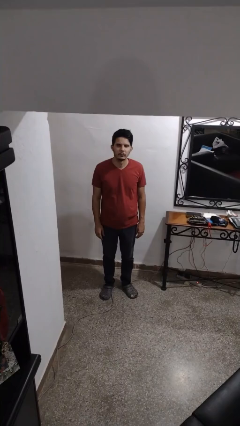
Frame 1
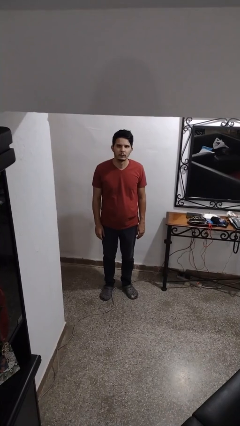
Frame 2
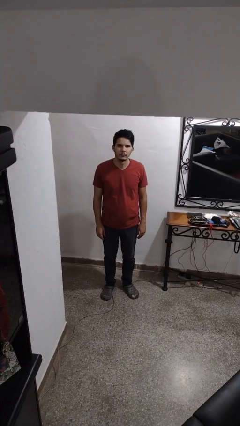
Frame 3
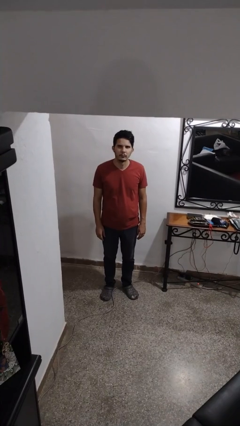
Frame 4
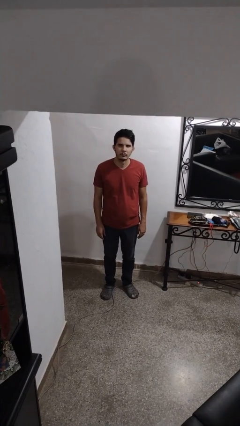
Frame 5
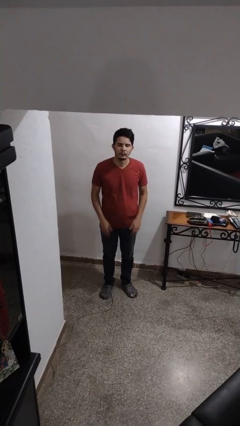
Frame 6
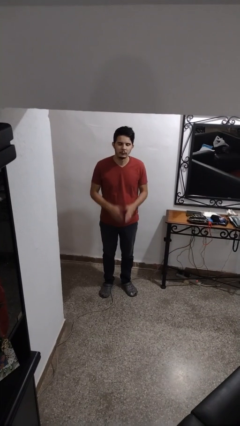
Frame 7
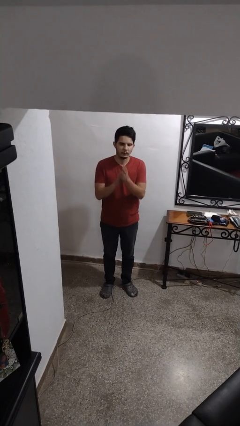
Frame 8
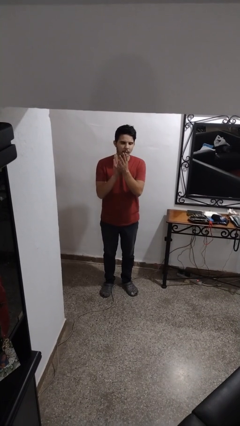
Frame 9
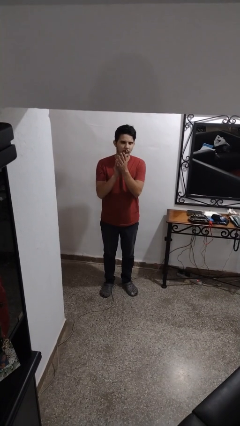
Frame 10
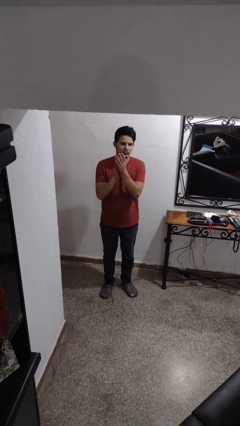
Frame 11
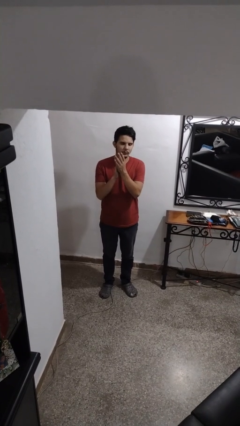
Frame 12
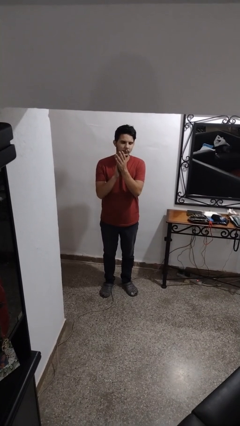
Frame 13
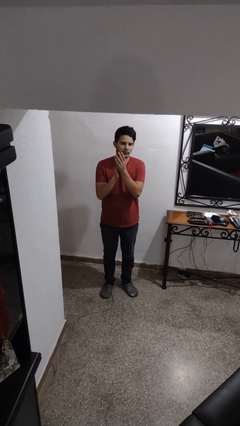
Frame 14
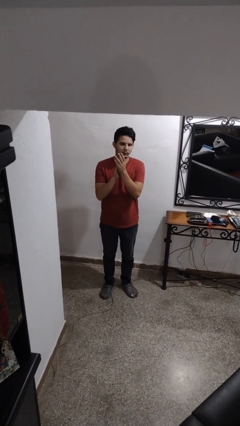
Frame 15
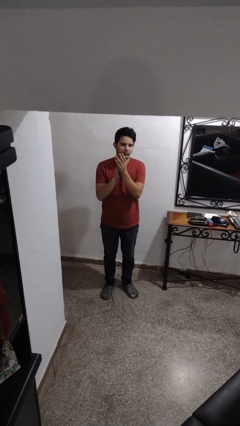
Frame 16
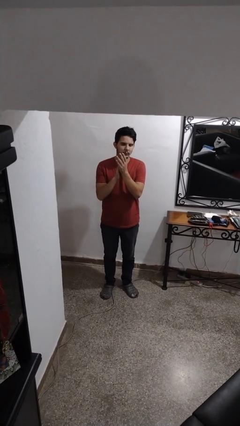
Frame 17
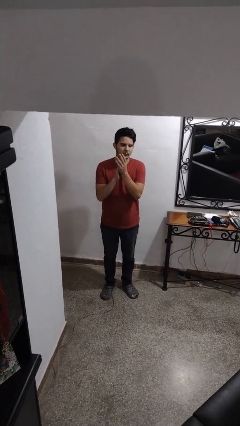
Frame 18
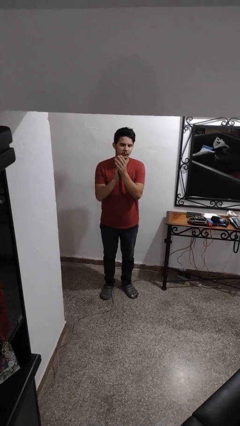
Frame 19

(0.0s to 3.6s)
person claps hands

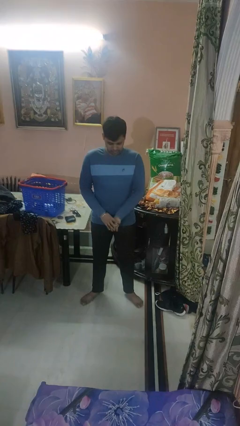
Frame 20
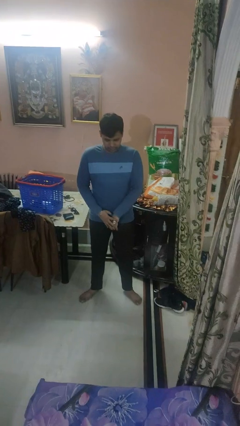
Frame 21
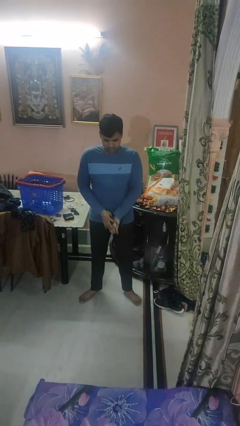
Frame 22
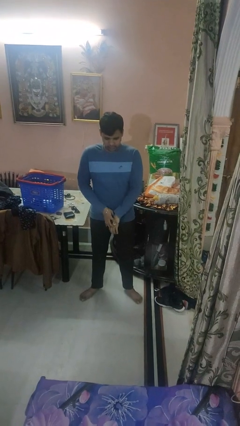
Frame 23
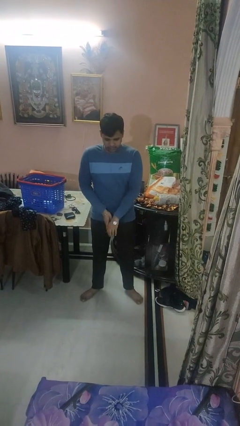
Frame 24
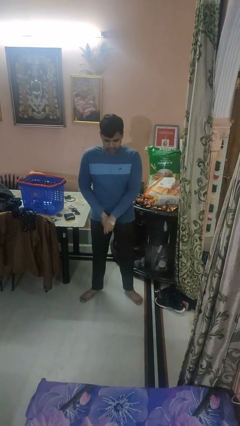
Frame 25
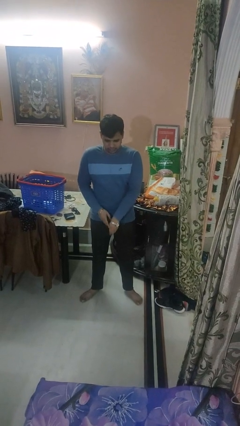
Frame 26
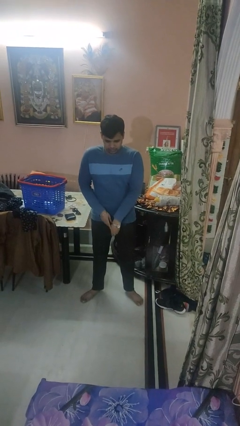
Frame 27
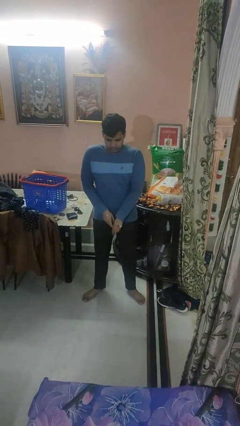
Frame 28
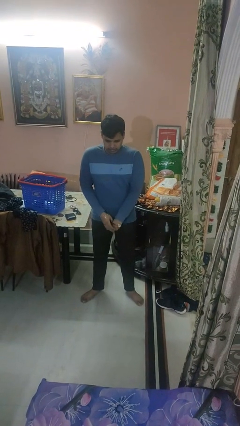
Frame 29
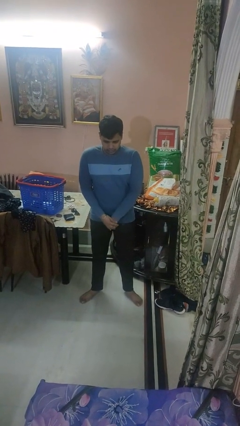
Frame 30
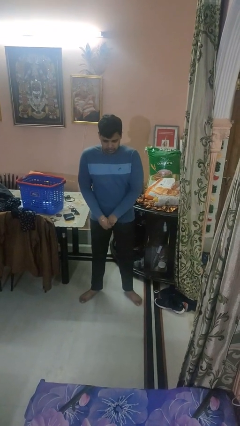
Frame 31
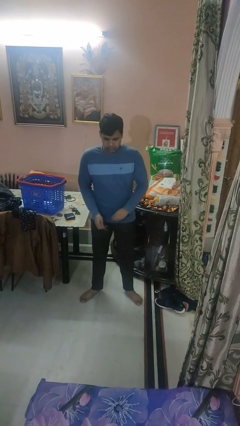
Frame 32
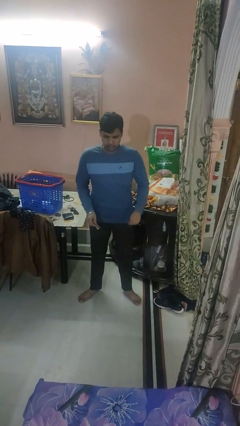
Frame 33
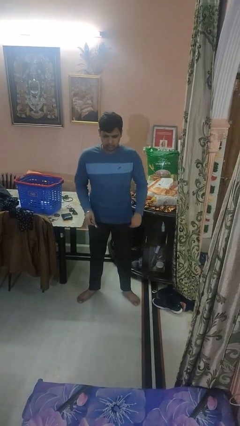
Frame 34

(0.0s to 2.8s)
person takes off wristwatch

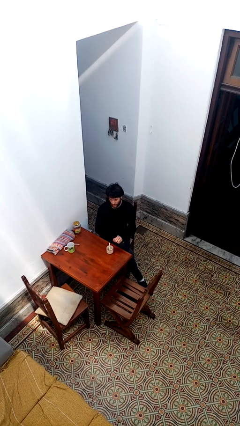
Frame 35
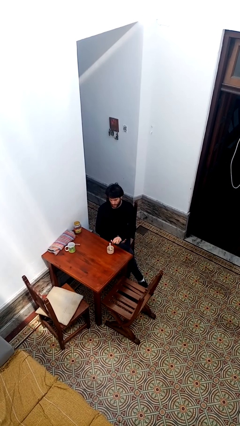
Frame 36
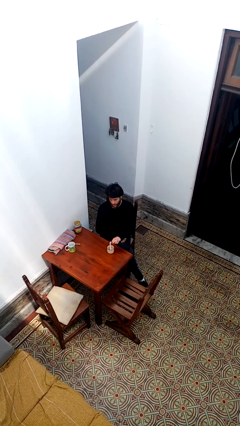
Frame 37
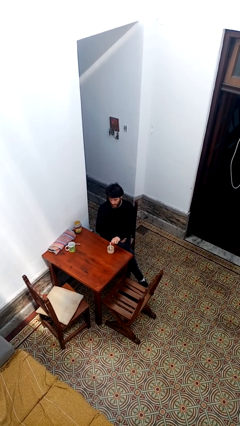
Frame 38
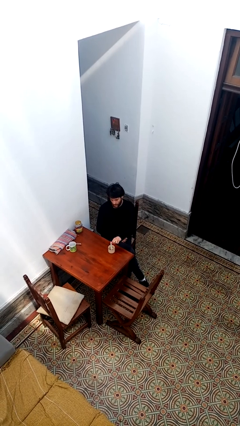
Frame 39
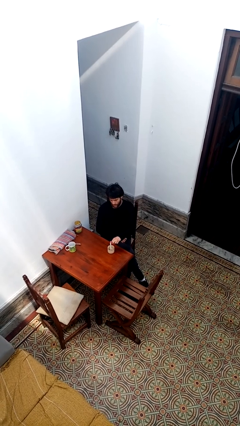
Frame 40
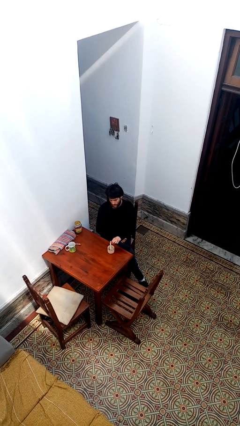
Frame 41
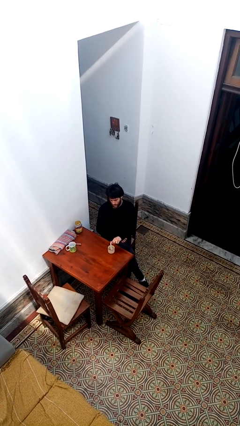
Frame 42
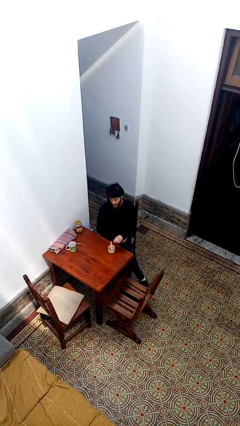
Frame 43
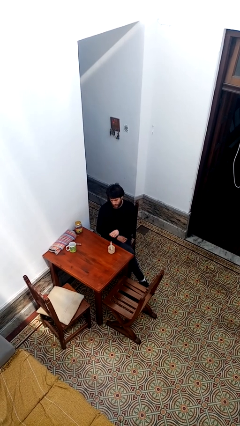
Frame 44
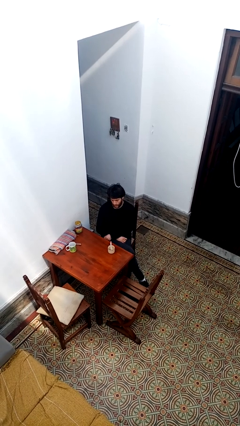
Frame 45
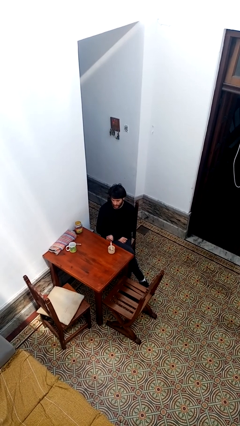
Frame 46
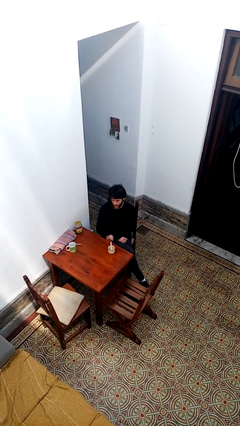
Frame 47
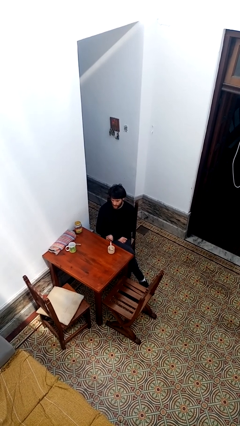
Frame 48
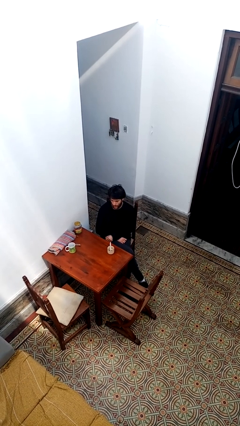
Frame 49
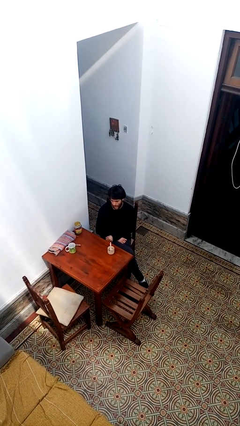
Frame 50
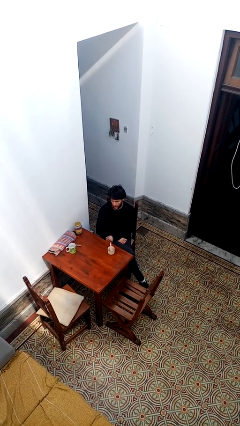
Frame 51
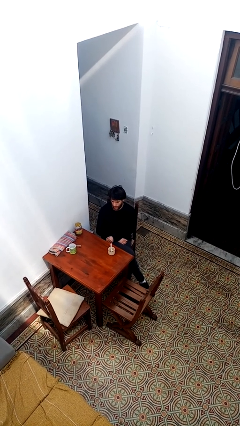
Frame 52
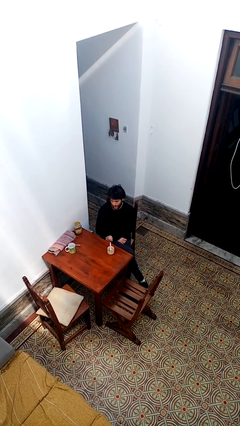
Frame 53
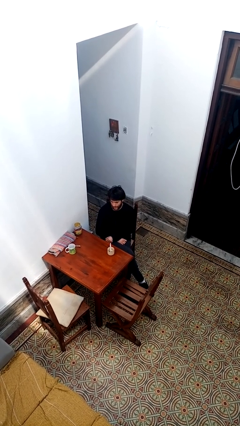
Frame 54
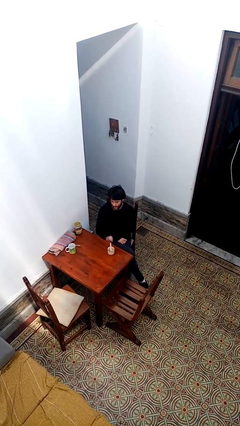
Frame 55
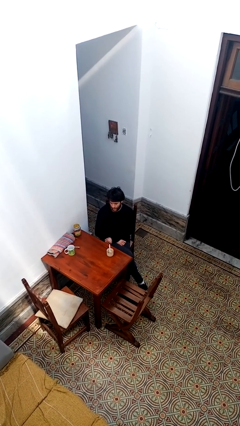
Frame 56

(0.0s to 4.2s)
person lights candle

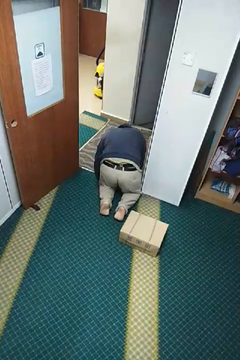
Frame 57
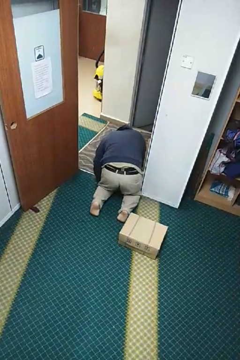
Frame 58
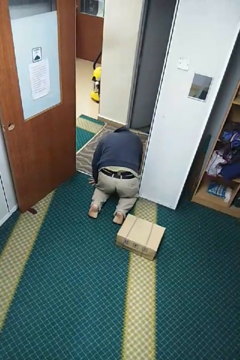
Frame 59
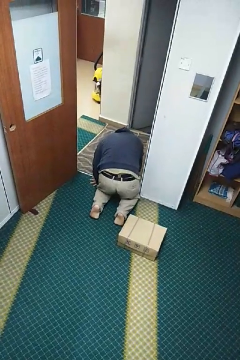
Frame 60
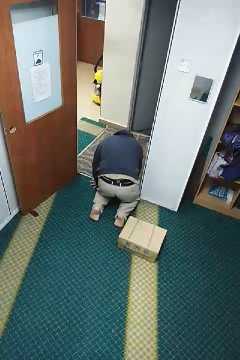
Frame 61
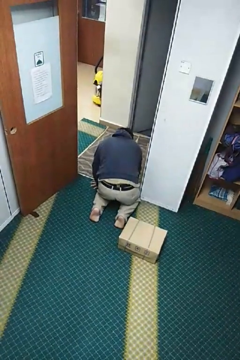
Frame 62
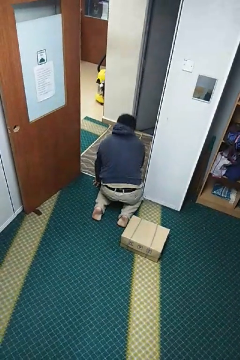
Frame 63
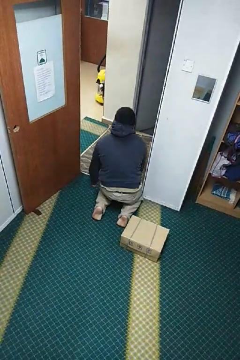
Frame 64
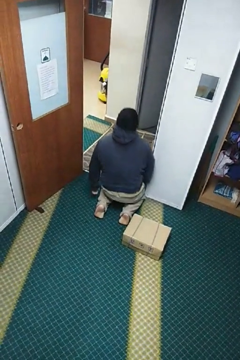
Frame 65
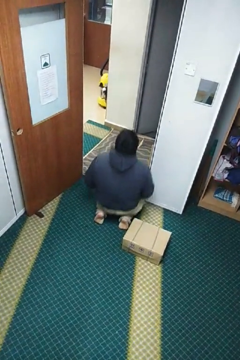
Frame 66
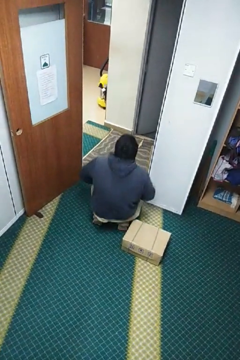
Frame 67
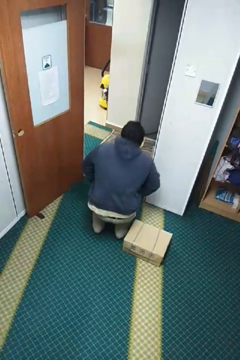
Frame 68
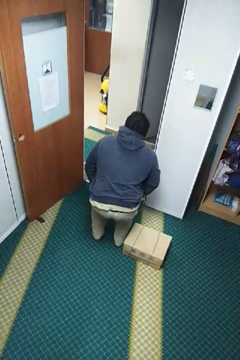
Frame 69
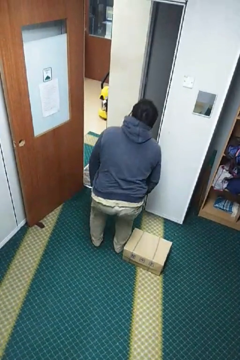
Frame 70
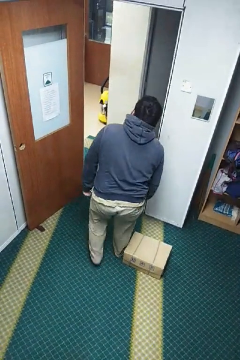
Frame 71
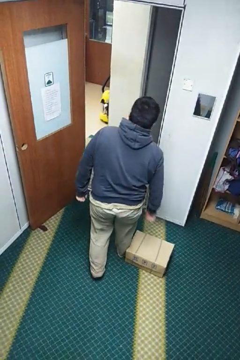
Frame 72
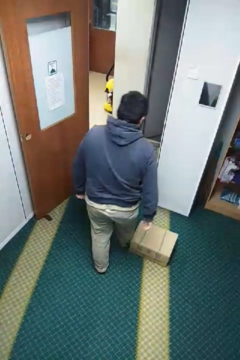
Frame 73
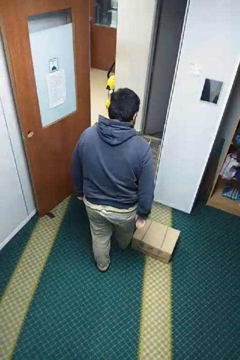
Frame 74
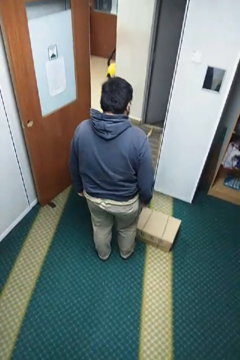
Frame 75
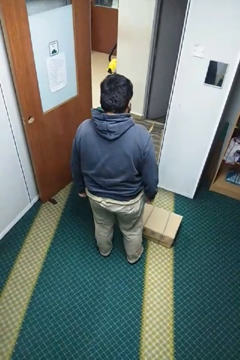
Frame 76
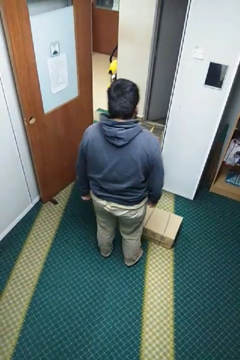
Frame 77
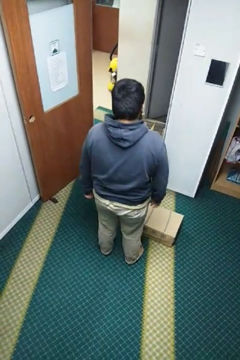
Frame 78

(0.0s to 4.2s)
person stands up from floor

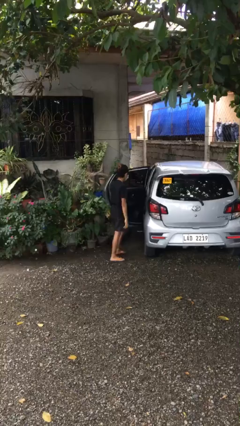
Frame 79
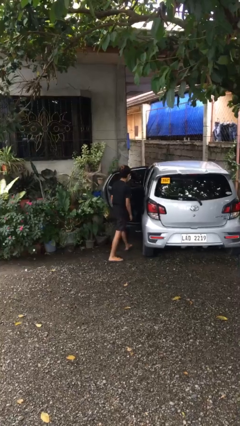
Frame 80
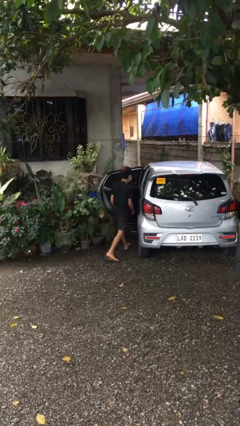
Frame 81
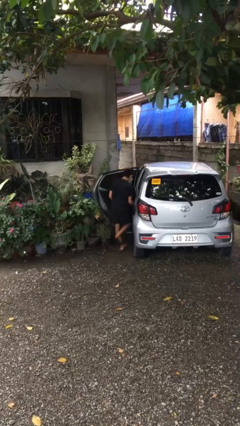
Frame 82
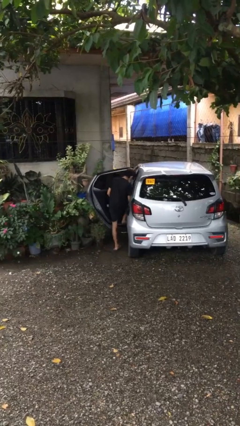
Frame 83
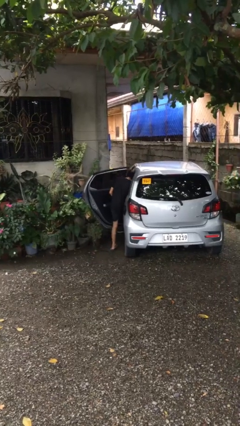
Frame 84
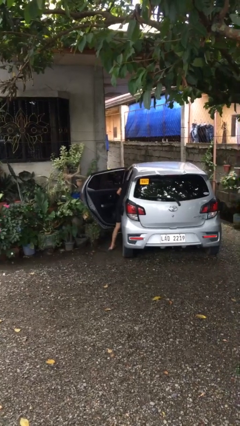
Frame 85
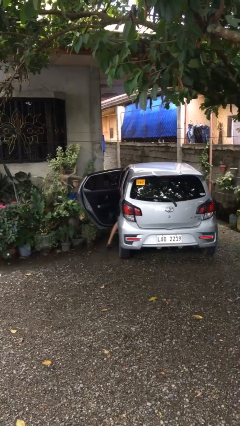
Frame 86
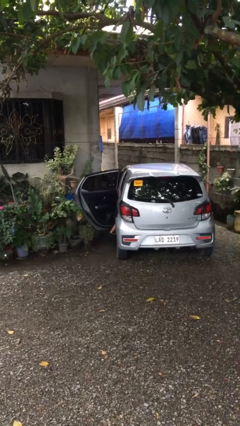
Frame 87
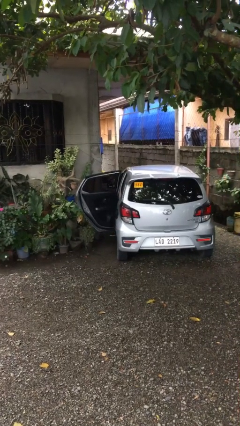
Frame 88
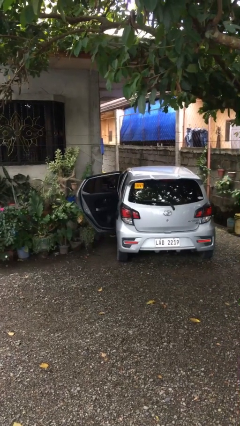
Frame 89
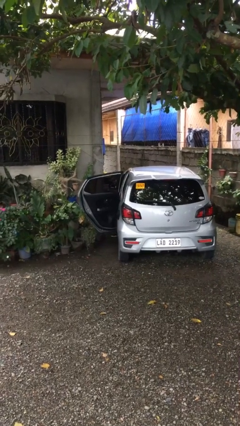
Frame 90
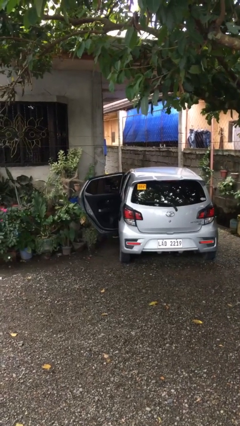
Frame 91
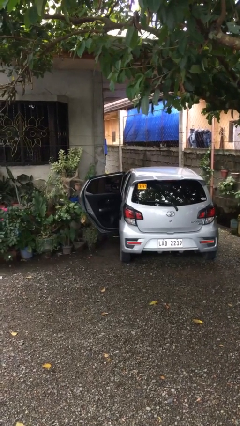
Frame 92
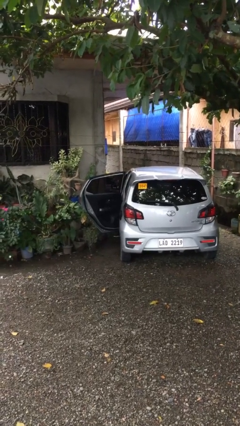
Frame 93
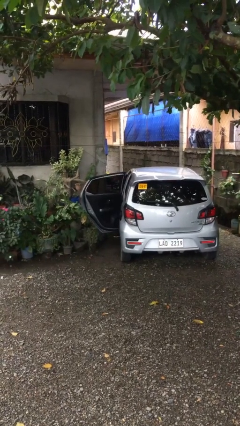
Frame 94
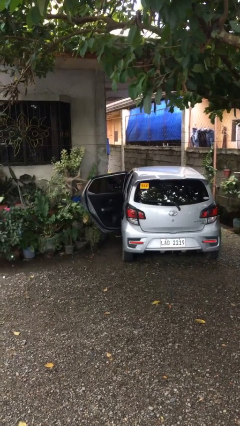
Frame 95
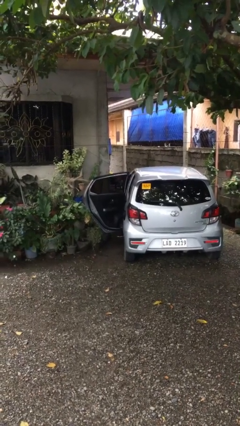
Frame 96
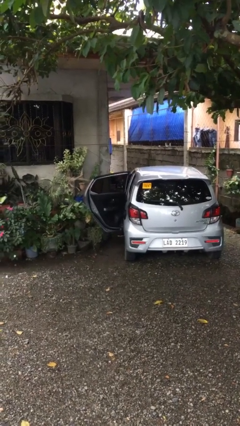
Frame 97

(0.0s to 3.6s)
person enters car
